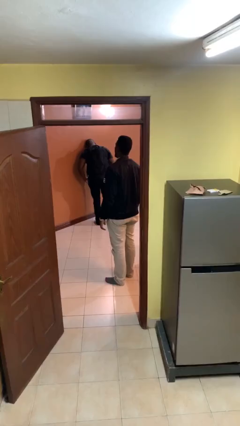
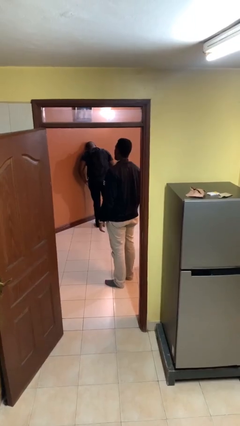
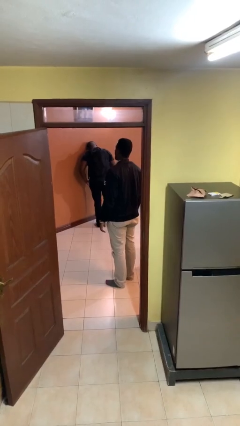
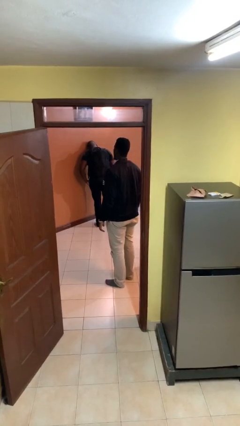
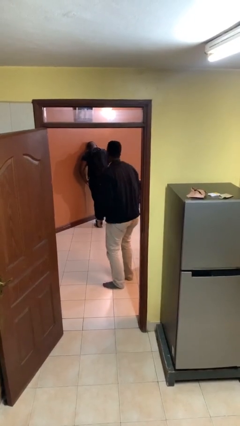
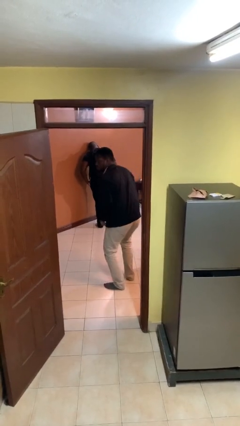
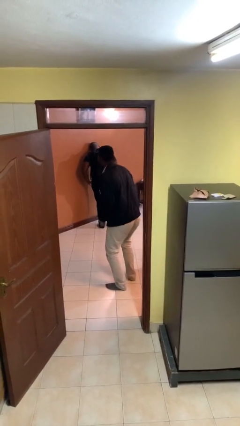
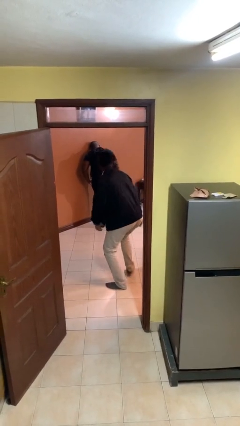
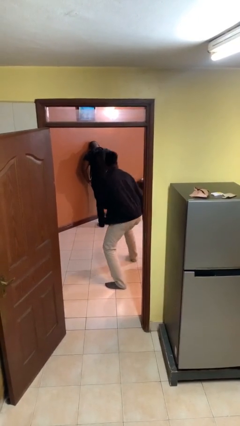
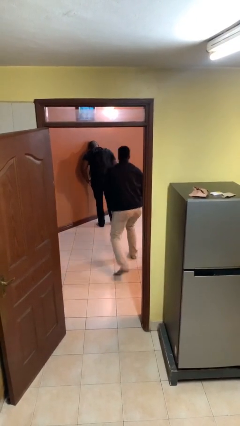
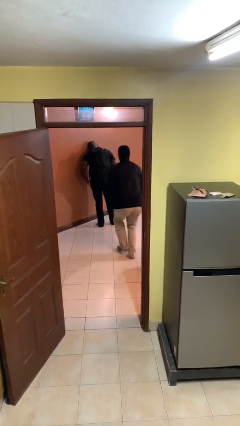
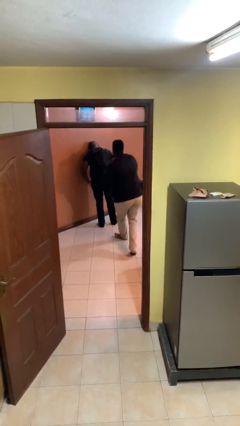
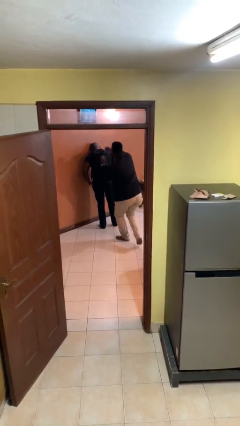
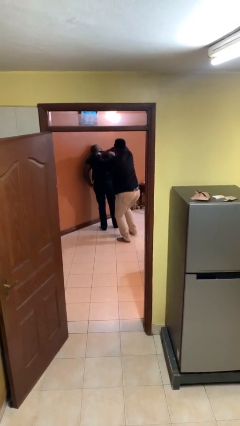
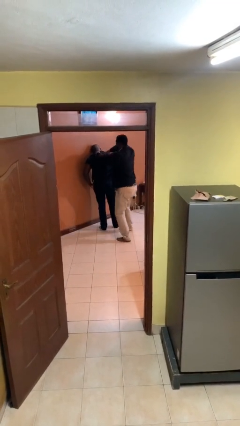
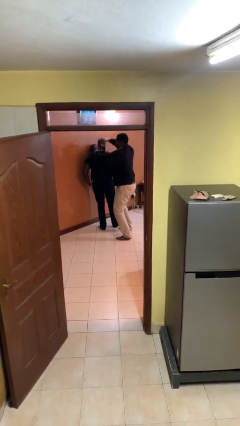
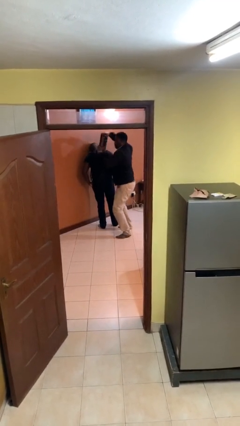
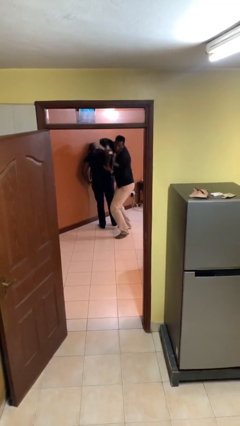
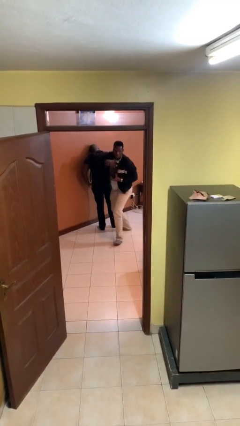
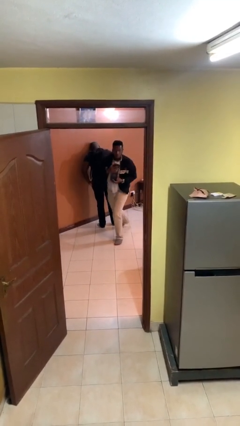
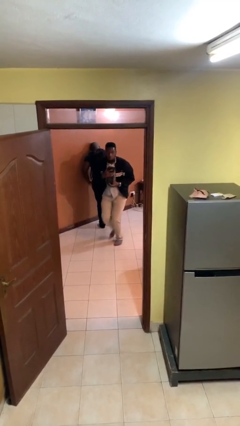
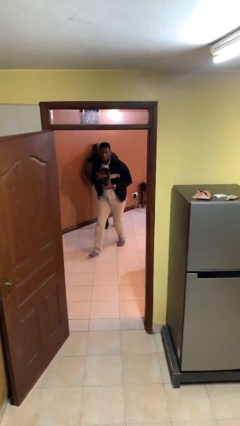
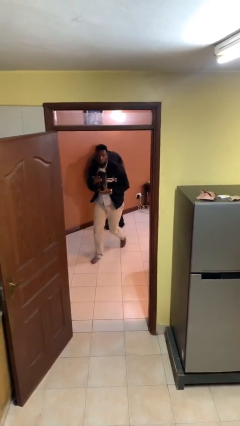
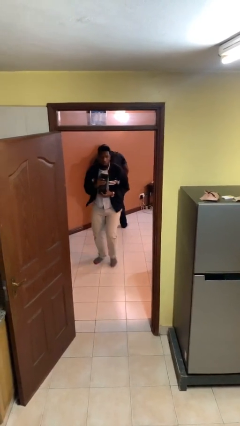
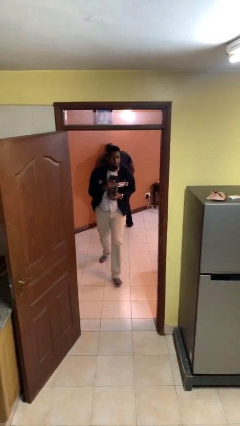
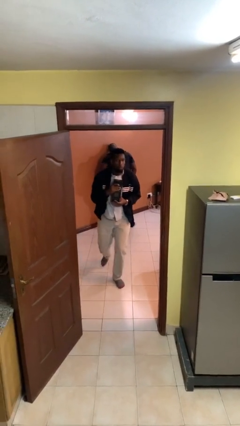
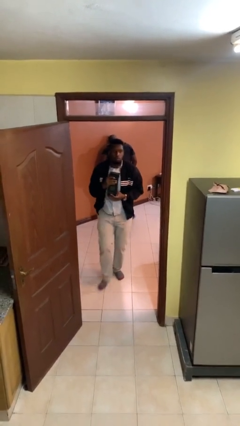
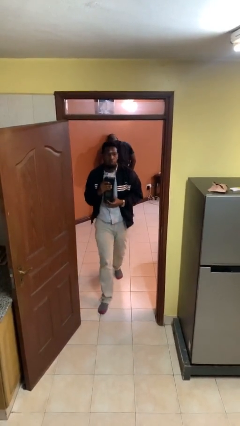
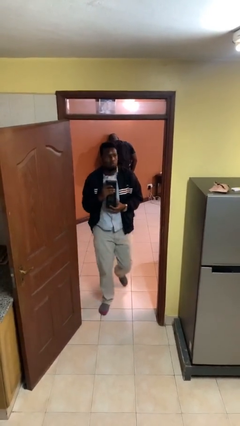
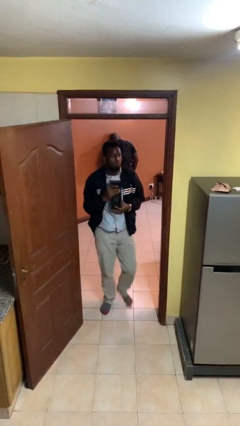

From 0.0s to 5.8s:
person steals object from person

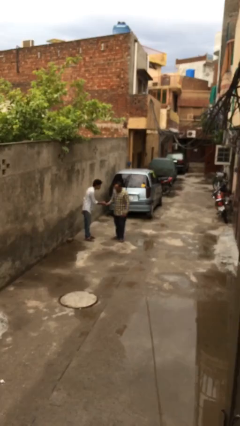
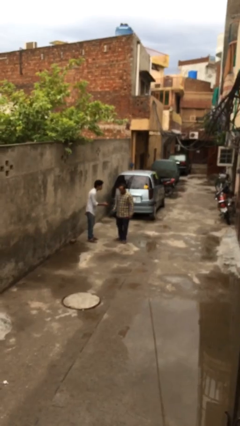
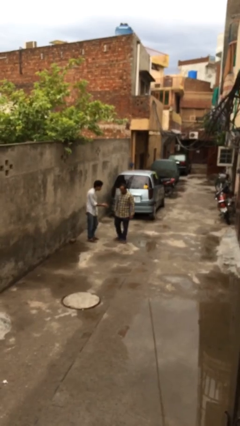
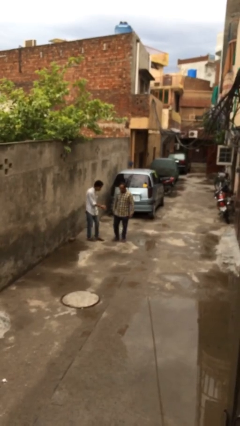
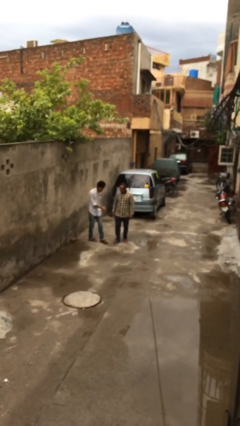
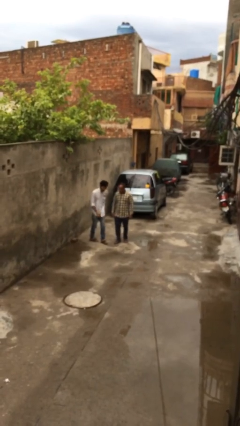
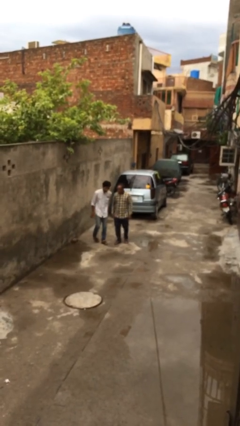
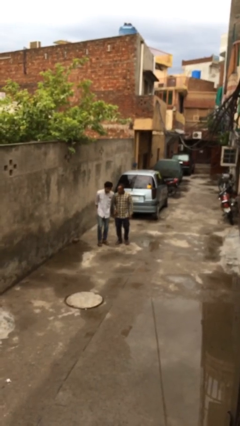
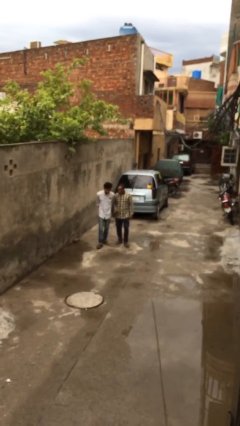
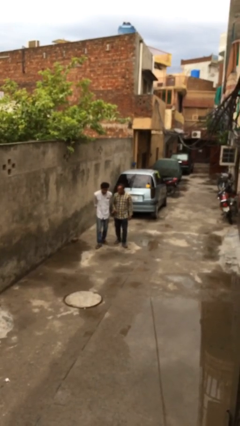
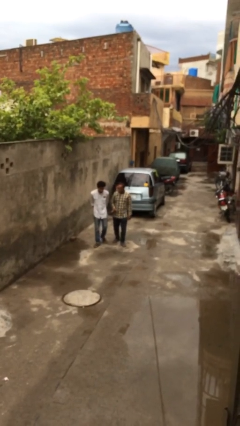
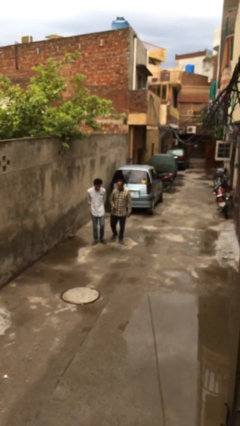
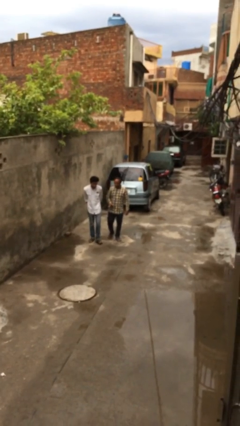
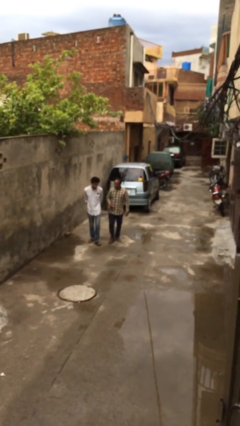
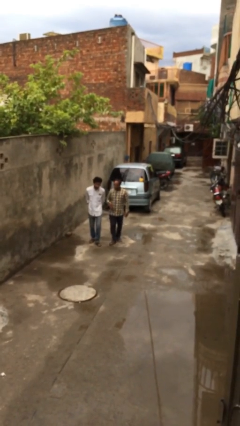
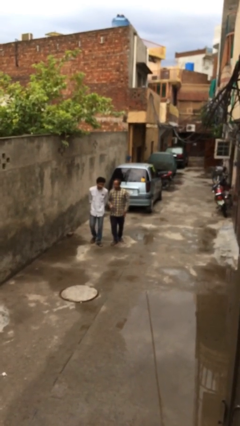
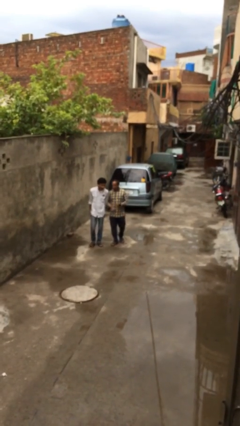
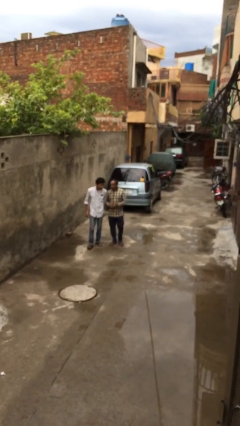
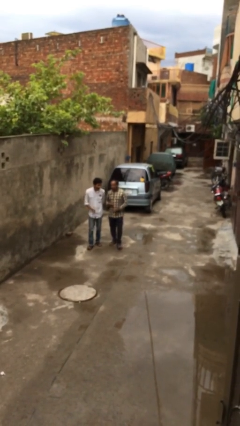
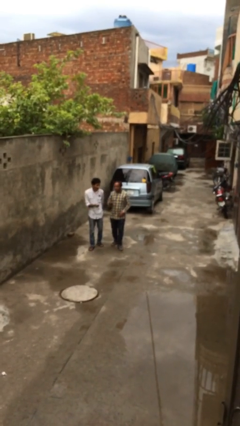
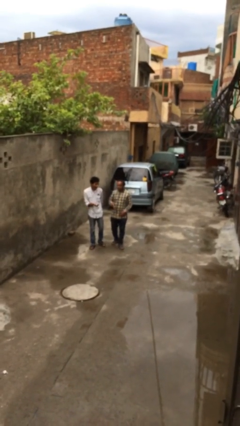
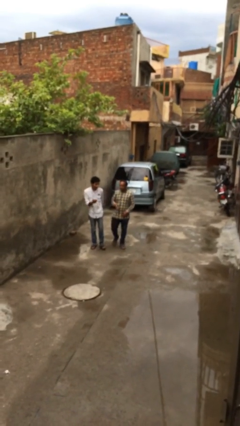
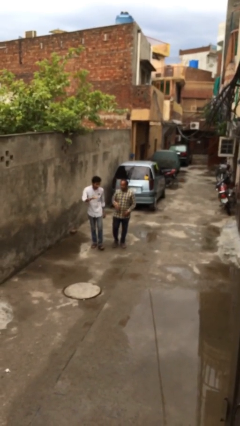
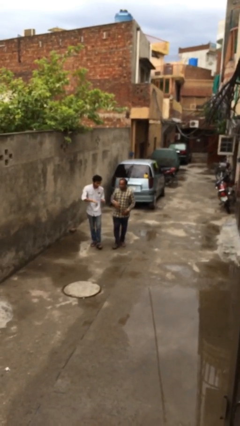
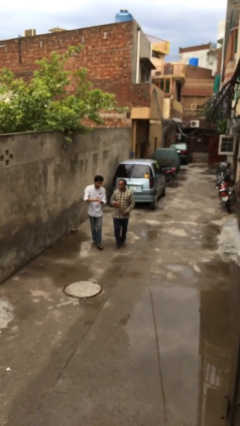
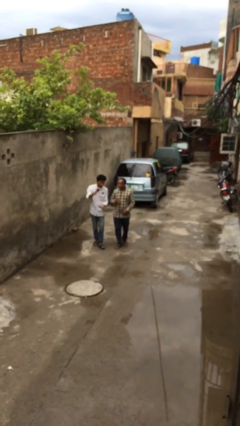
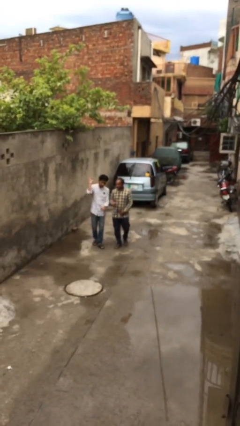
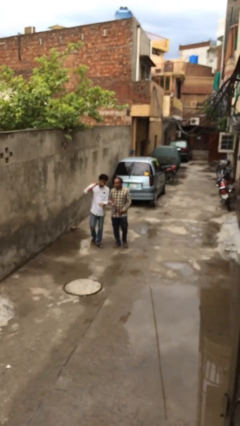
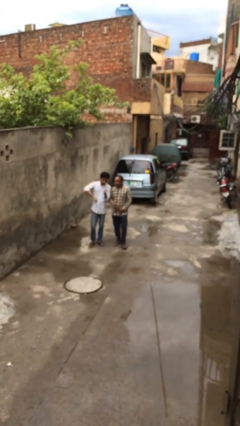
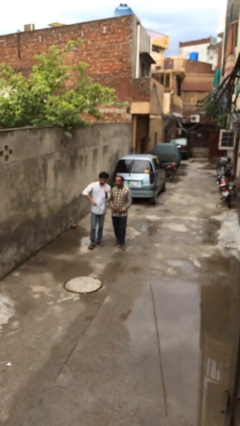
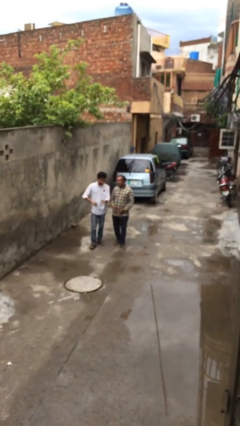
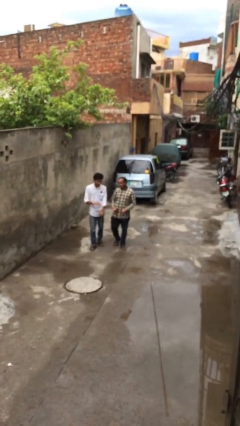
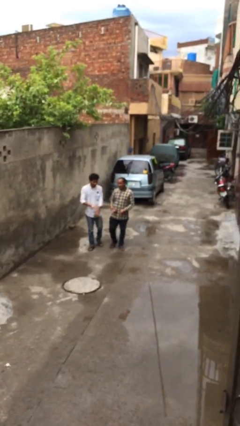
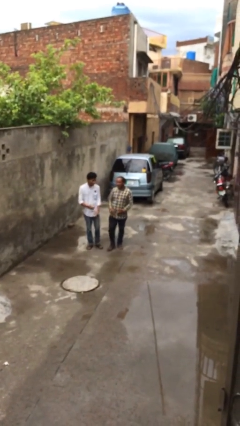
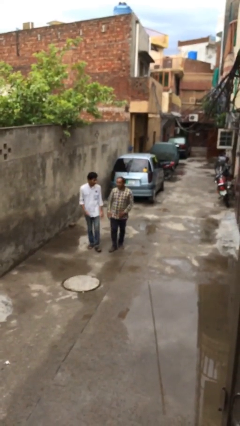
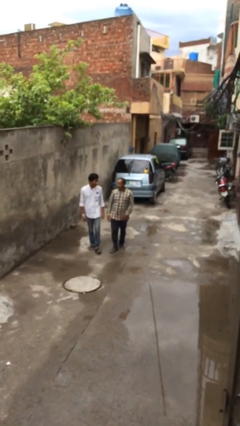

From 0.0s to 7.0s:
person talks to person

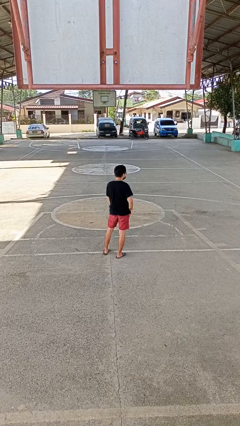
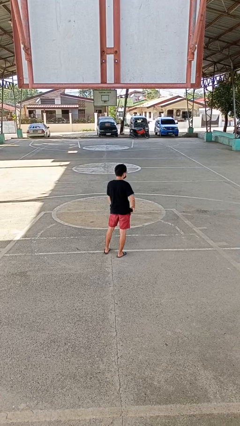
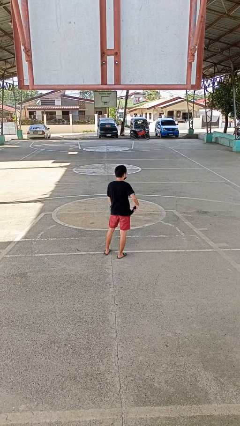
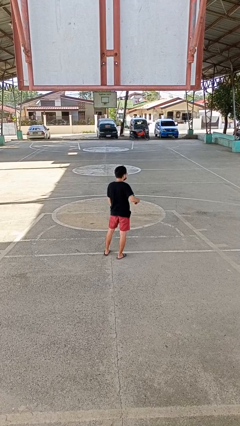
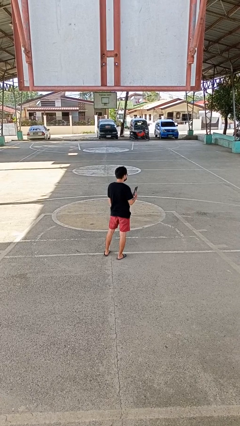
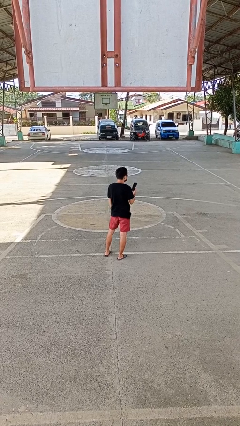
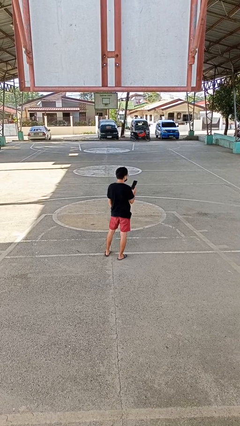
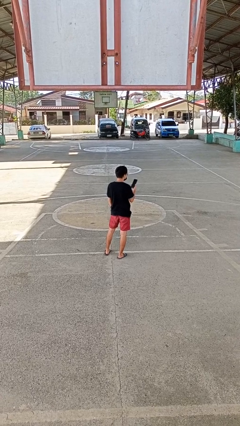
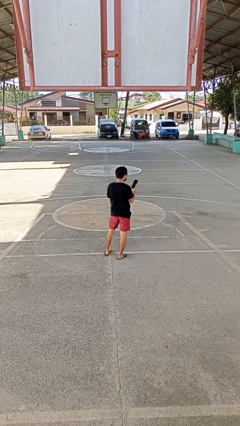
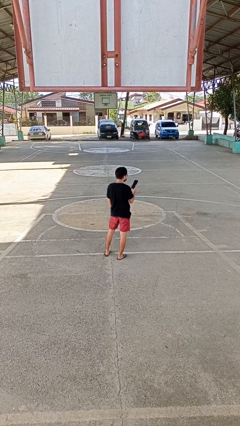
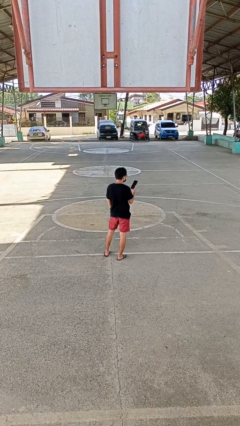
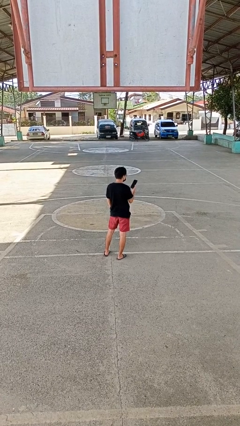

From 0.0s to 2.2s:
person takes phone from pocket

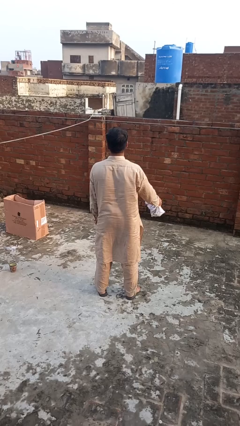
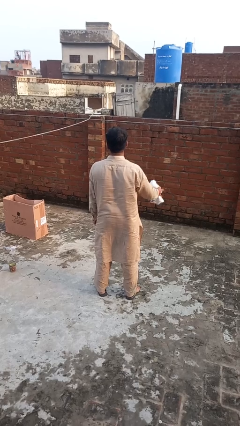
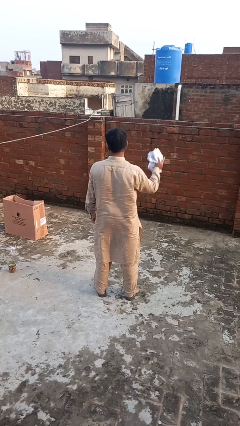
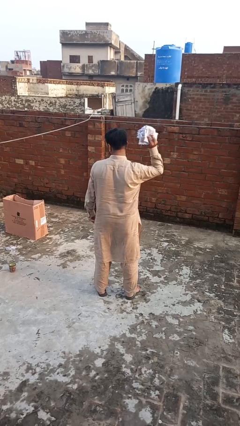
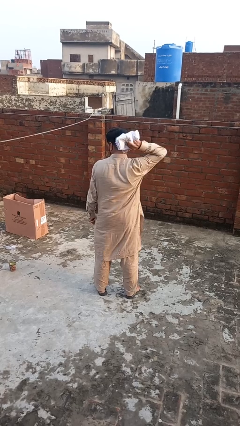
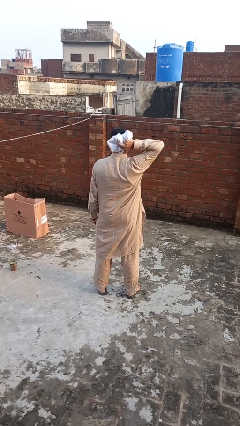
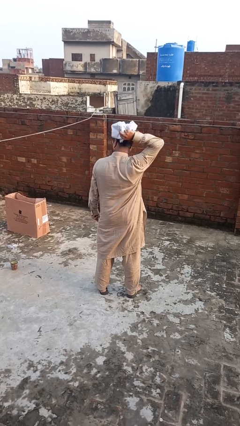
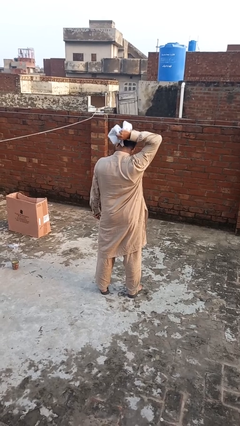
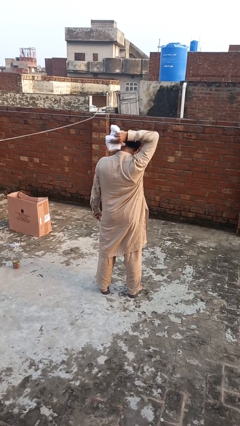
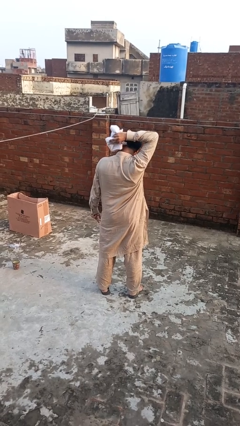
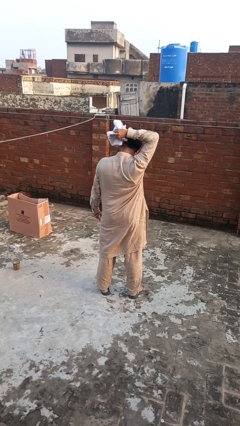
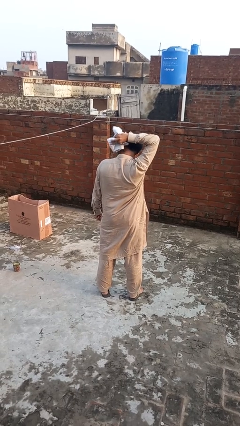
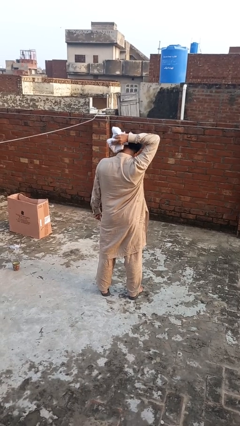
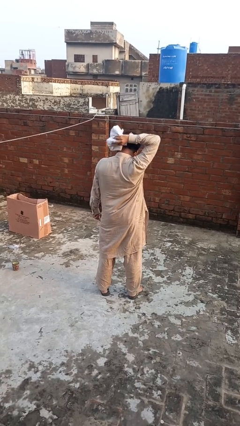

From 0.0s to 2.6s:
person dries hair with towel
